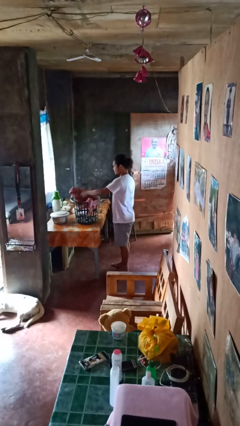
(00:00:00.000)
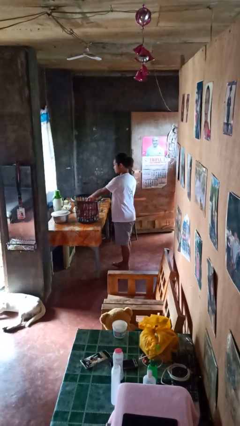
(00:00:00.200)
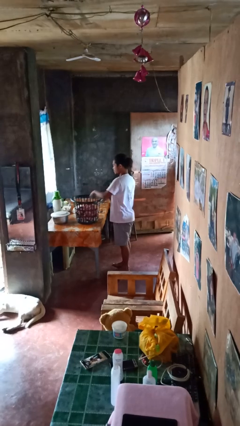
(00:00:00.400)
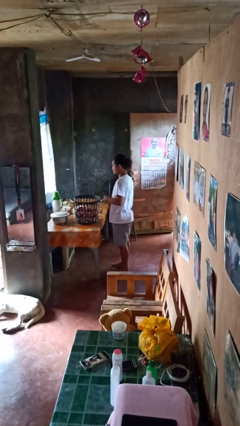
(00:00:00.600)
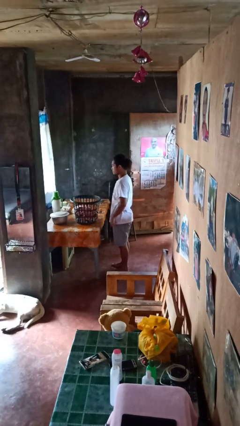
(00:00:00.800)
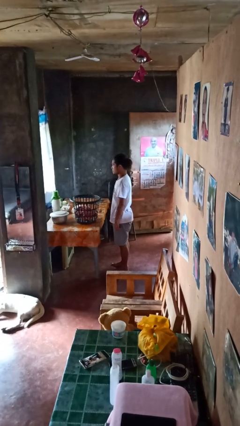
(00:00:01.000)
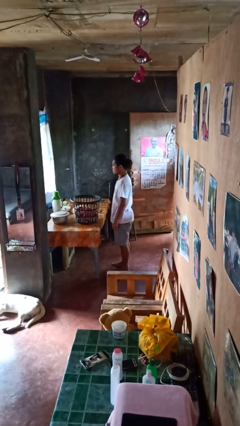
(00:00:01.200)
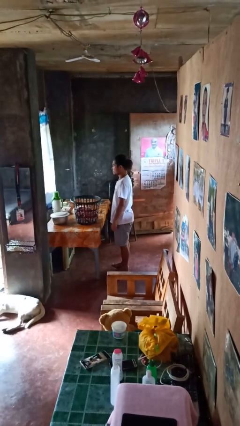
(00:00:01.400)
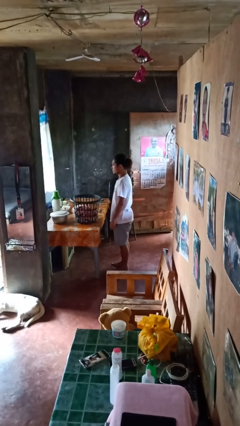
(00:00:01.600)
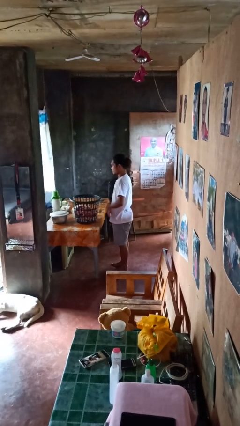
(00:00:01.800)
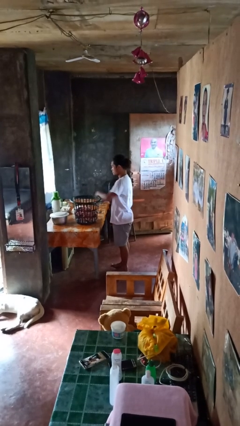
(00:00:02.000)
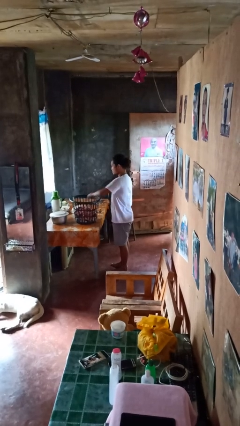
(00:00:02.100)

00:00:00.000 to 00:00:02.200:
person puts object into basket

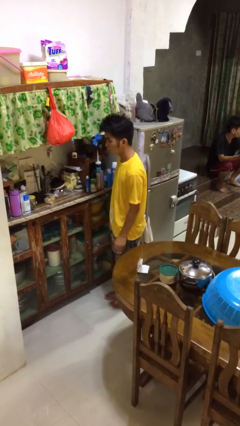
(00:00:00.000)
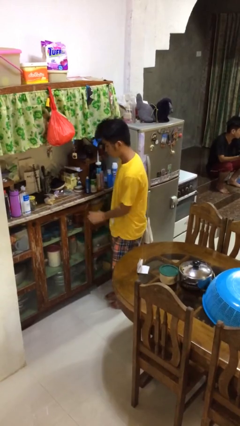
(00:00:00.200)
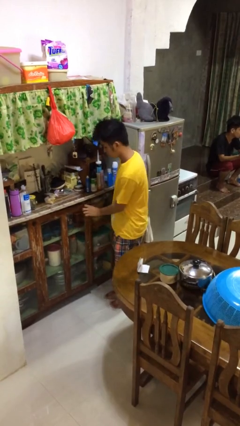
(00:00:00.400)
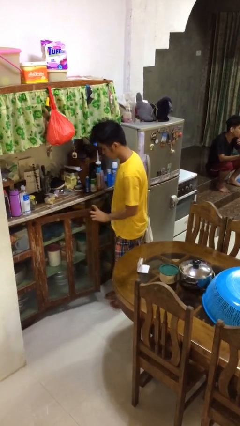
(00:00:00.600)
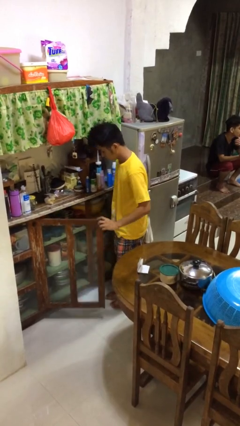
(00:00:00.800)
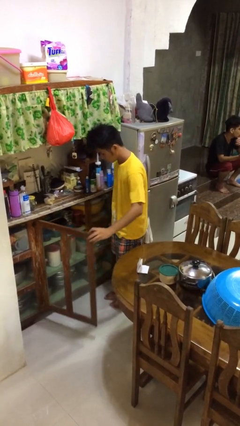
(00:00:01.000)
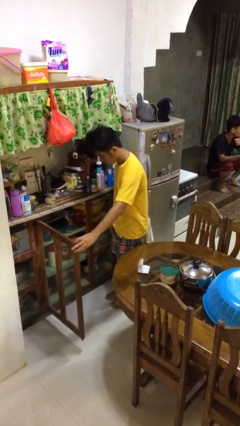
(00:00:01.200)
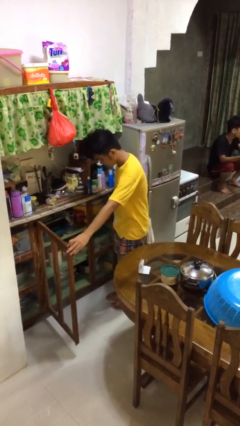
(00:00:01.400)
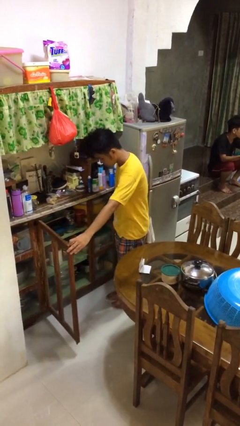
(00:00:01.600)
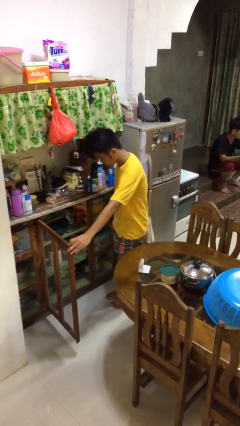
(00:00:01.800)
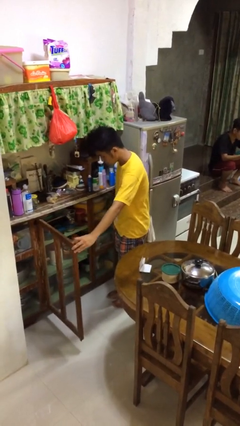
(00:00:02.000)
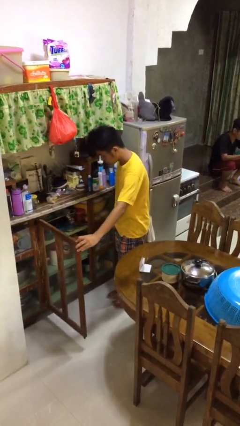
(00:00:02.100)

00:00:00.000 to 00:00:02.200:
person opens cabinet

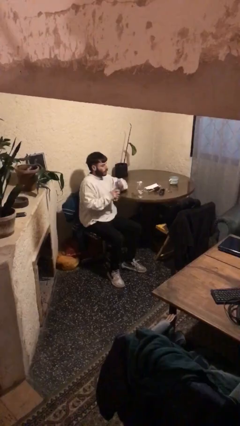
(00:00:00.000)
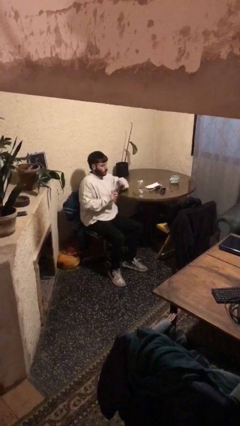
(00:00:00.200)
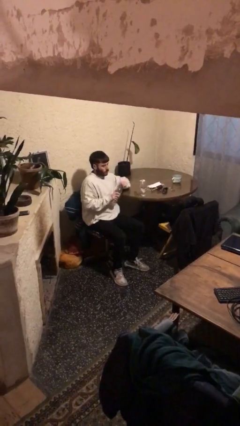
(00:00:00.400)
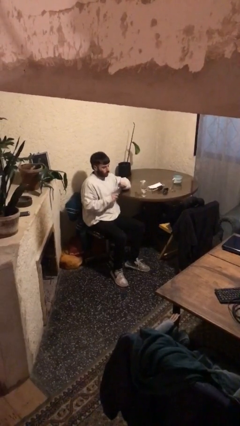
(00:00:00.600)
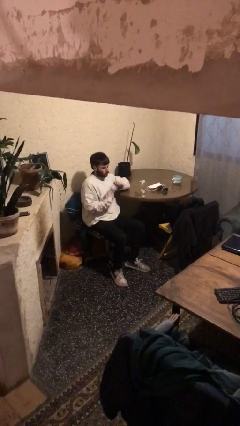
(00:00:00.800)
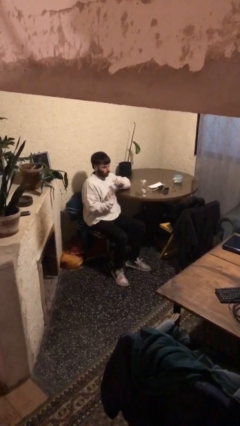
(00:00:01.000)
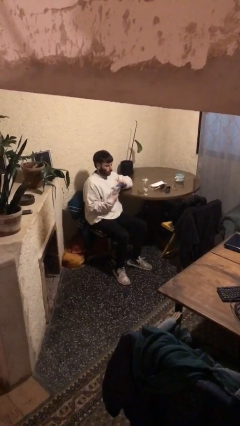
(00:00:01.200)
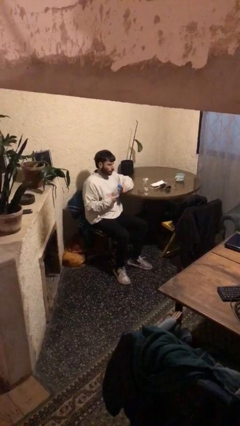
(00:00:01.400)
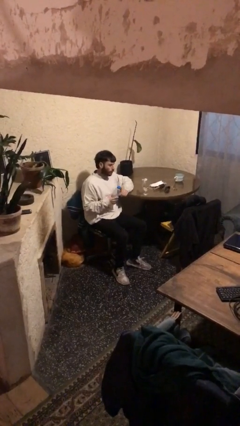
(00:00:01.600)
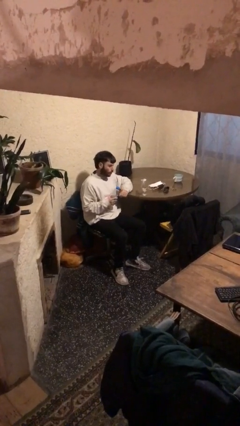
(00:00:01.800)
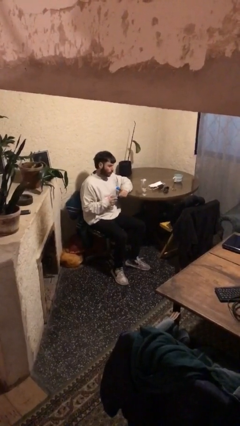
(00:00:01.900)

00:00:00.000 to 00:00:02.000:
person screws lid to bottle

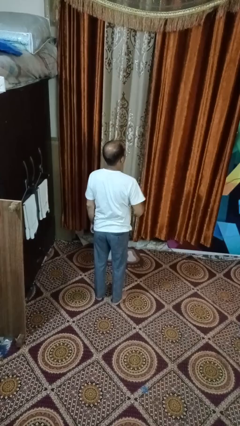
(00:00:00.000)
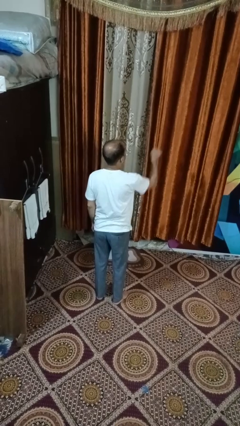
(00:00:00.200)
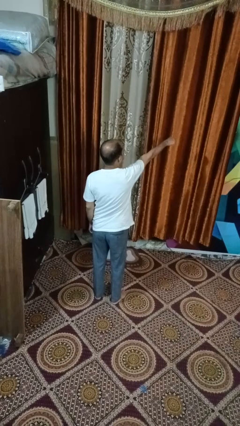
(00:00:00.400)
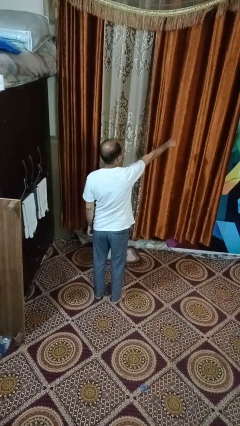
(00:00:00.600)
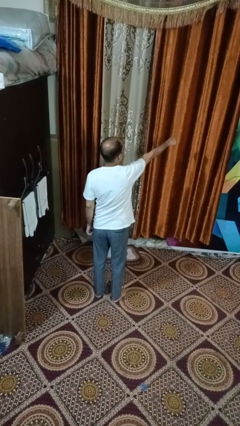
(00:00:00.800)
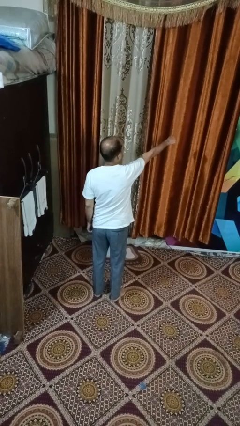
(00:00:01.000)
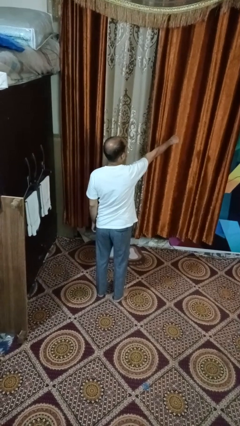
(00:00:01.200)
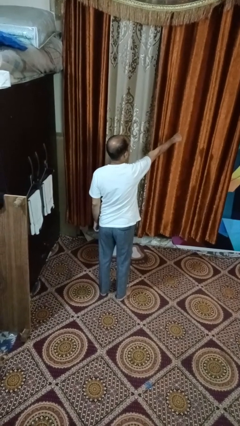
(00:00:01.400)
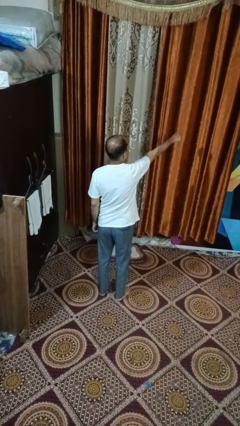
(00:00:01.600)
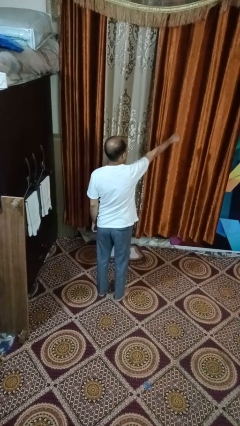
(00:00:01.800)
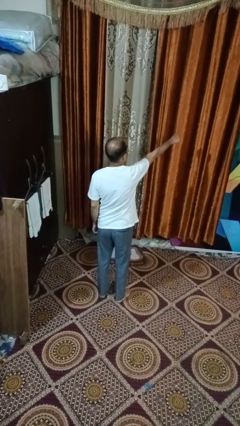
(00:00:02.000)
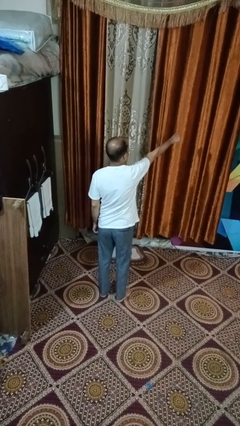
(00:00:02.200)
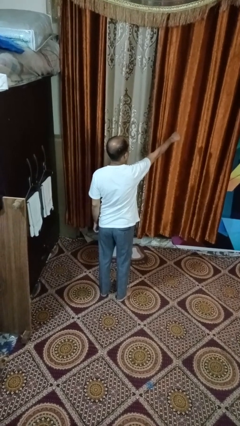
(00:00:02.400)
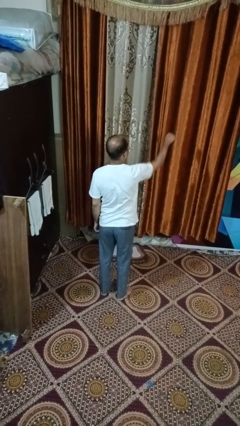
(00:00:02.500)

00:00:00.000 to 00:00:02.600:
person punches

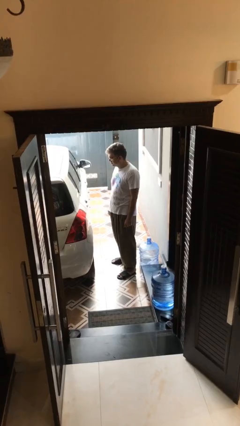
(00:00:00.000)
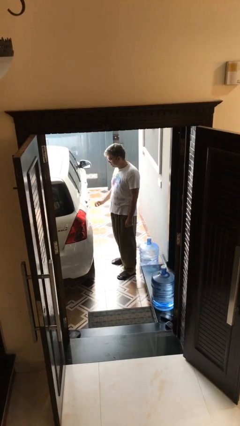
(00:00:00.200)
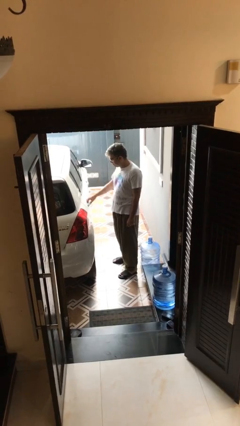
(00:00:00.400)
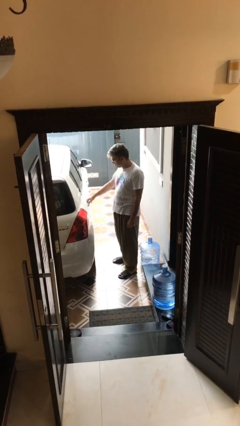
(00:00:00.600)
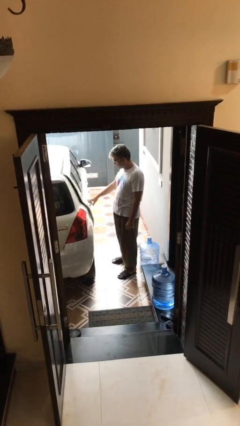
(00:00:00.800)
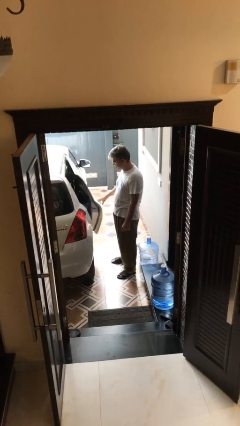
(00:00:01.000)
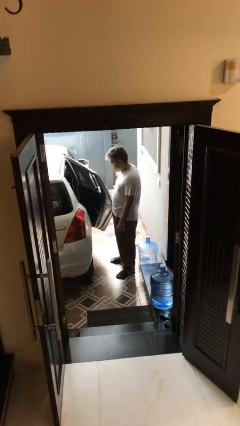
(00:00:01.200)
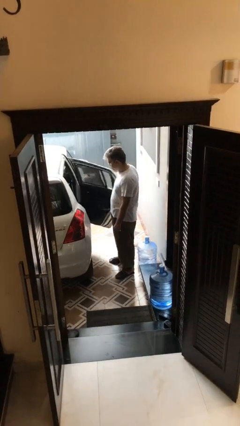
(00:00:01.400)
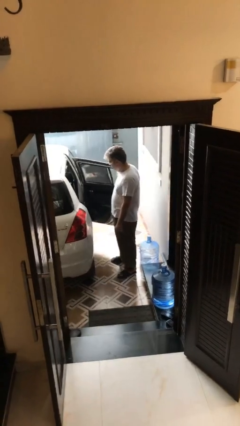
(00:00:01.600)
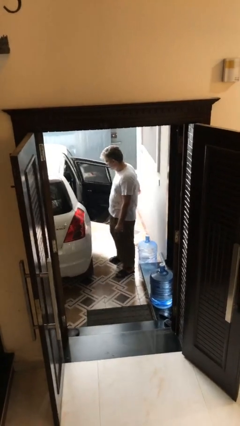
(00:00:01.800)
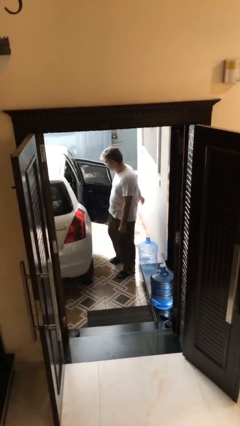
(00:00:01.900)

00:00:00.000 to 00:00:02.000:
person opens car door

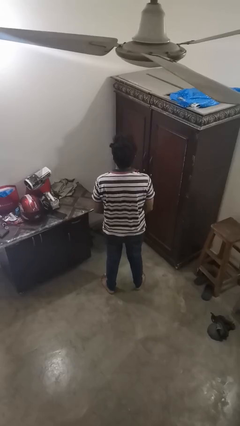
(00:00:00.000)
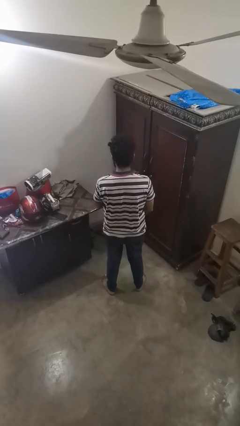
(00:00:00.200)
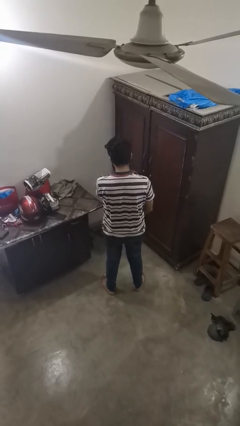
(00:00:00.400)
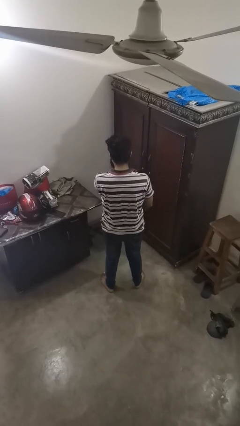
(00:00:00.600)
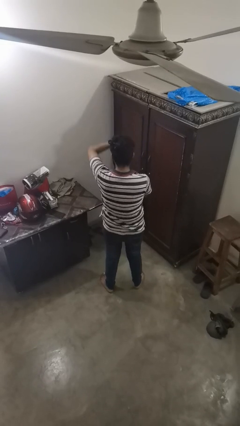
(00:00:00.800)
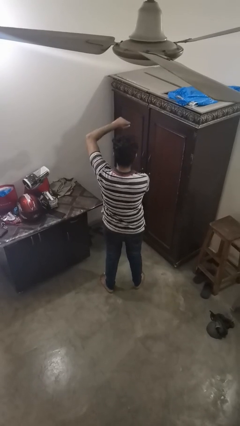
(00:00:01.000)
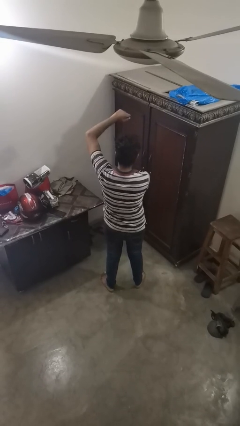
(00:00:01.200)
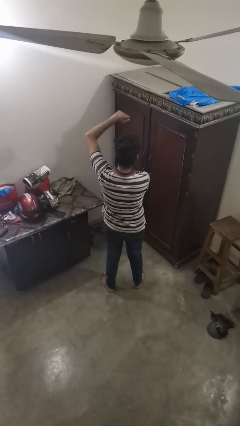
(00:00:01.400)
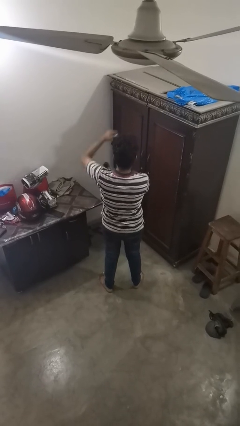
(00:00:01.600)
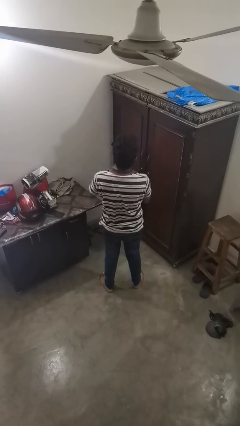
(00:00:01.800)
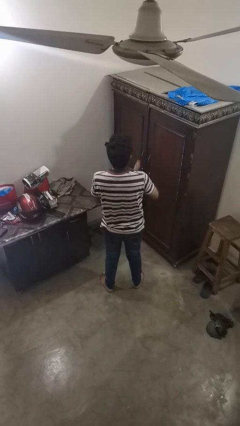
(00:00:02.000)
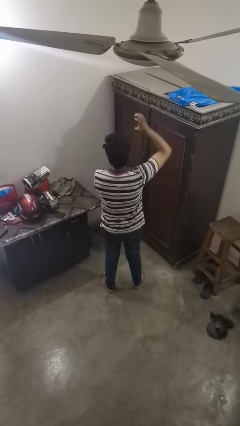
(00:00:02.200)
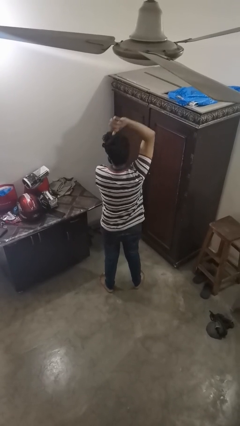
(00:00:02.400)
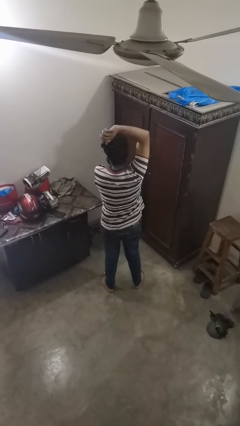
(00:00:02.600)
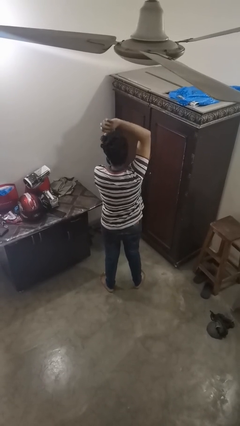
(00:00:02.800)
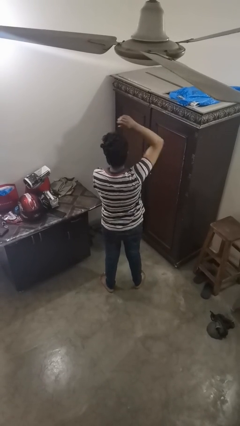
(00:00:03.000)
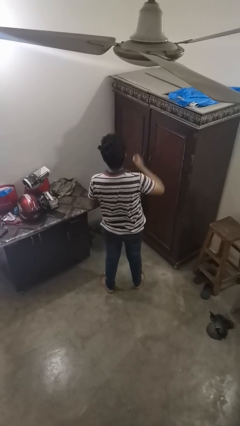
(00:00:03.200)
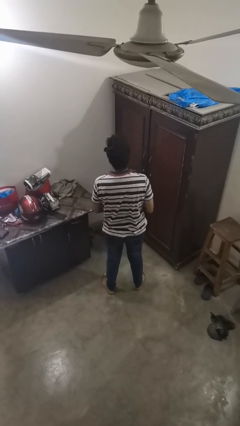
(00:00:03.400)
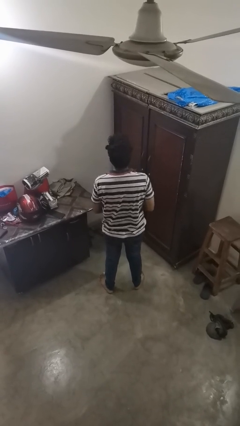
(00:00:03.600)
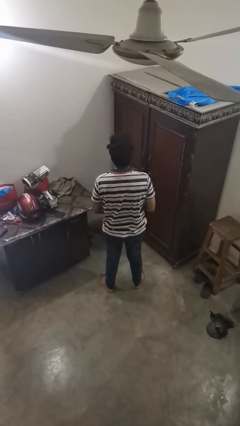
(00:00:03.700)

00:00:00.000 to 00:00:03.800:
person applies deodorant

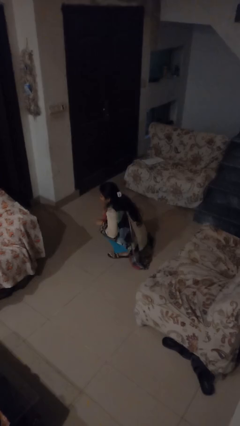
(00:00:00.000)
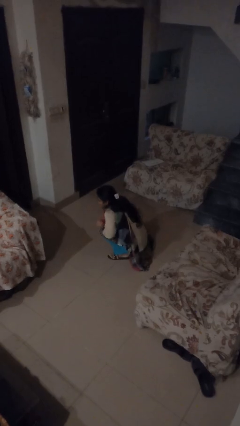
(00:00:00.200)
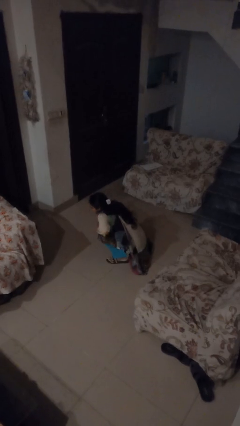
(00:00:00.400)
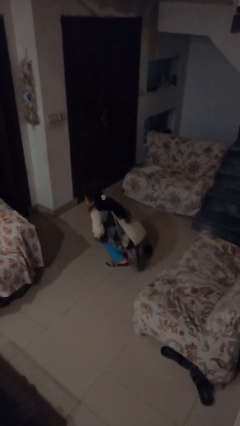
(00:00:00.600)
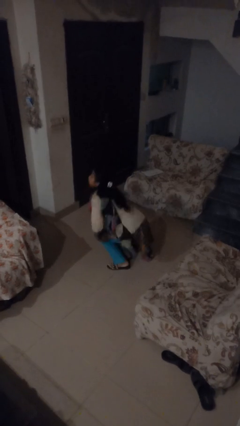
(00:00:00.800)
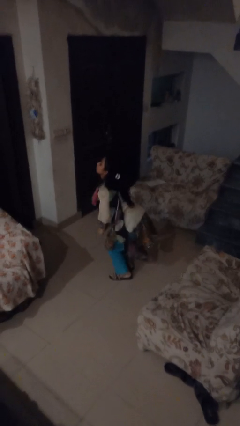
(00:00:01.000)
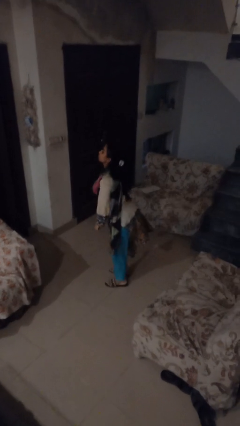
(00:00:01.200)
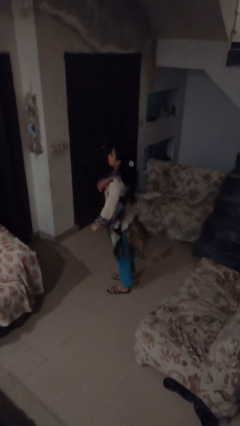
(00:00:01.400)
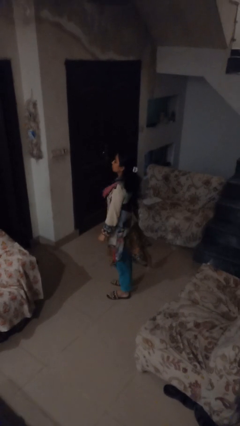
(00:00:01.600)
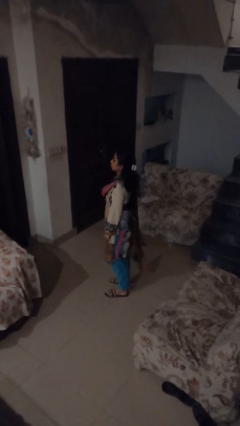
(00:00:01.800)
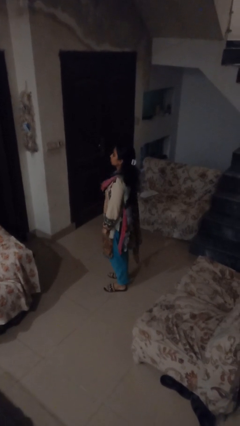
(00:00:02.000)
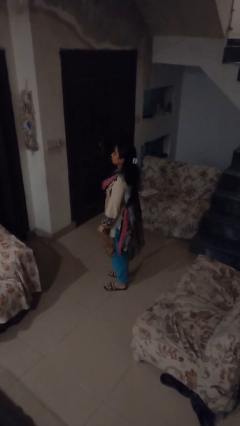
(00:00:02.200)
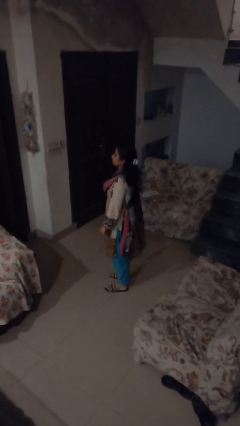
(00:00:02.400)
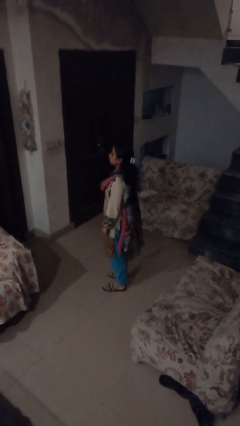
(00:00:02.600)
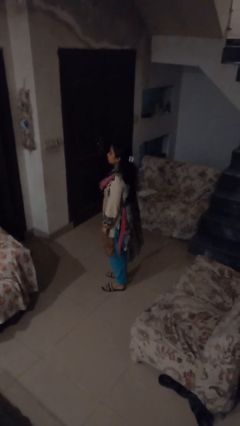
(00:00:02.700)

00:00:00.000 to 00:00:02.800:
person stands up
